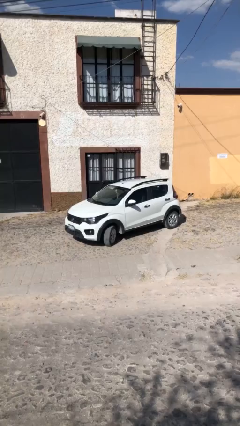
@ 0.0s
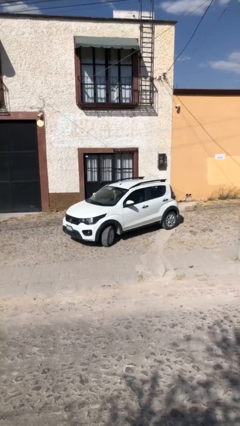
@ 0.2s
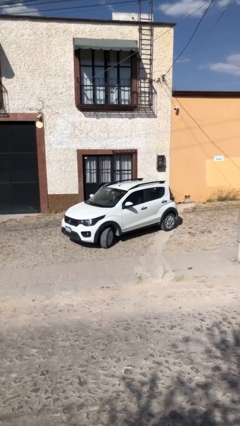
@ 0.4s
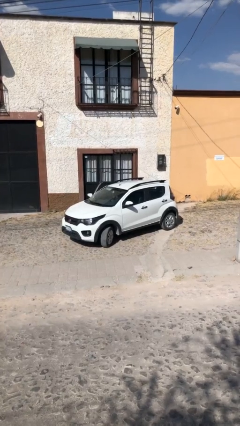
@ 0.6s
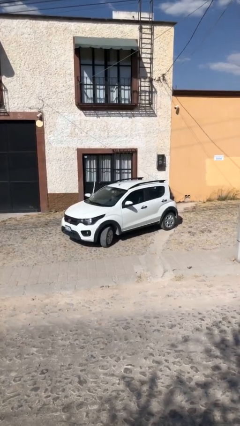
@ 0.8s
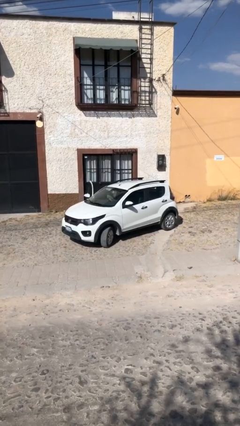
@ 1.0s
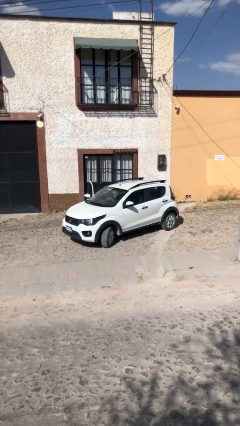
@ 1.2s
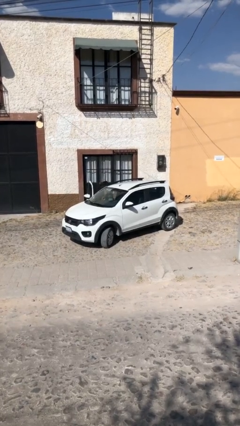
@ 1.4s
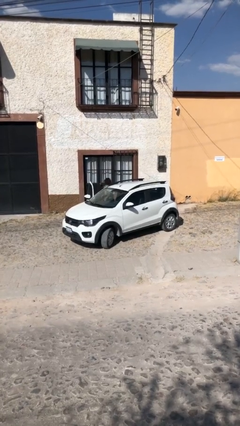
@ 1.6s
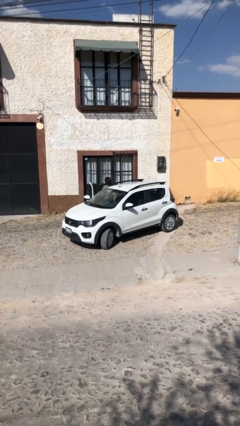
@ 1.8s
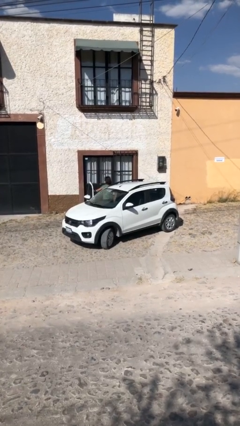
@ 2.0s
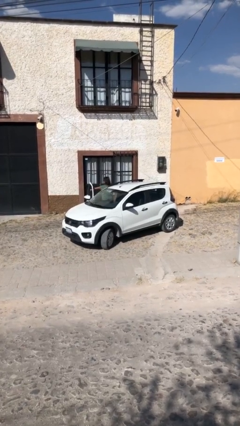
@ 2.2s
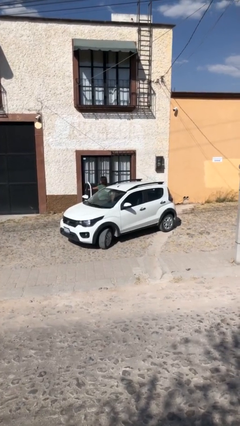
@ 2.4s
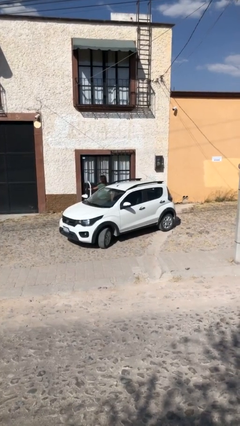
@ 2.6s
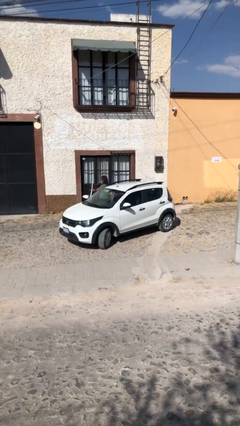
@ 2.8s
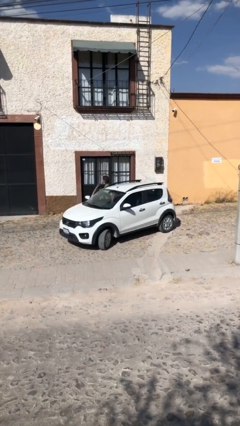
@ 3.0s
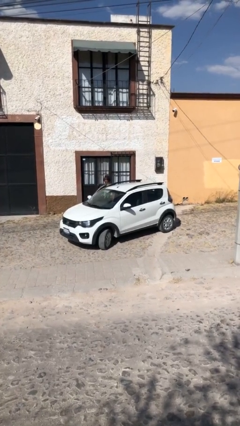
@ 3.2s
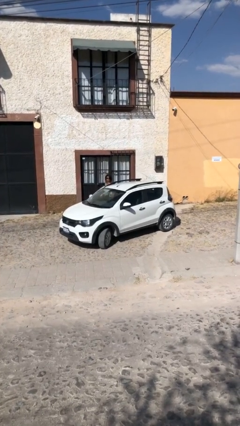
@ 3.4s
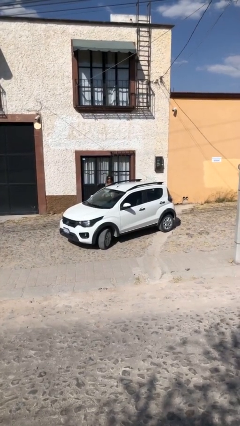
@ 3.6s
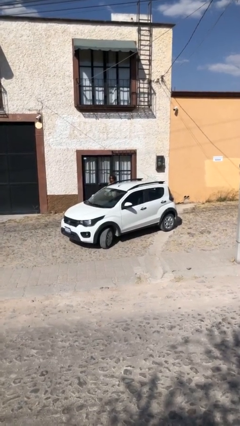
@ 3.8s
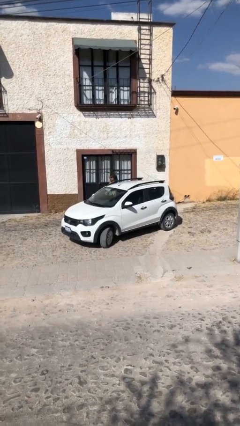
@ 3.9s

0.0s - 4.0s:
car drops off person

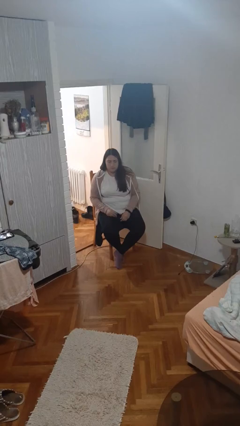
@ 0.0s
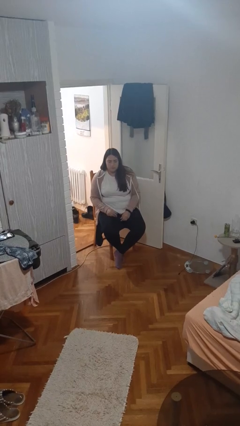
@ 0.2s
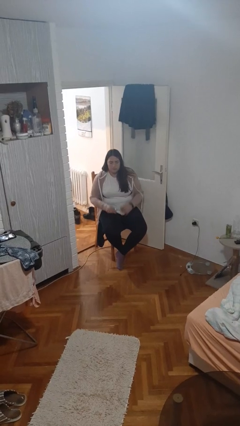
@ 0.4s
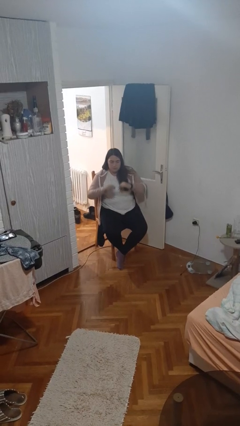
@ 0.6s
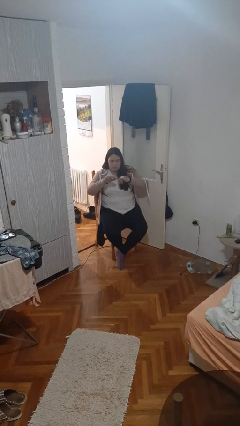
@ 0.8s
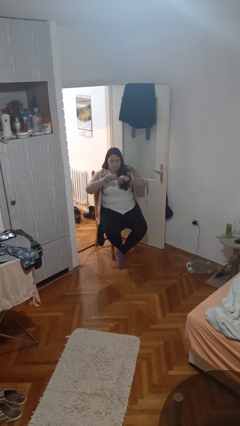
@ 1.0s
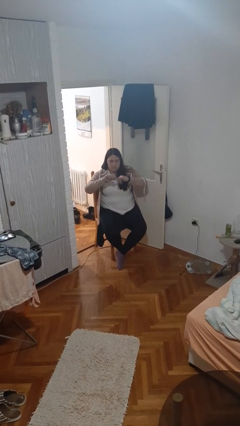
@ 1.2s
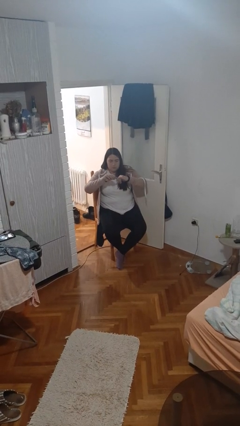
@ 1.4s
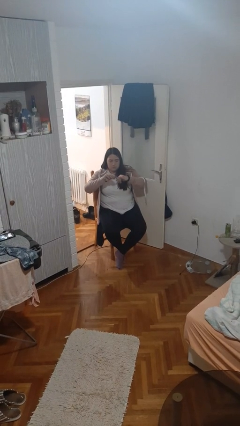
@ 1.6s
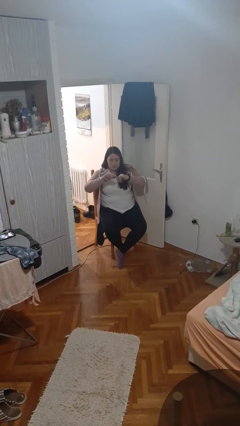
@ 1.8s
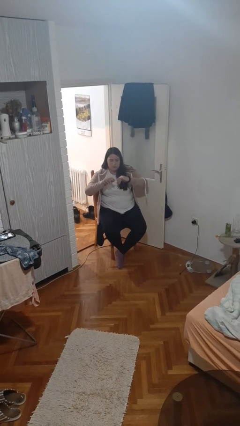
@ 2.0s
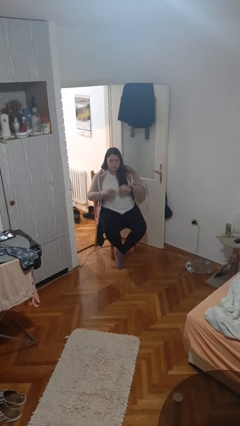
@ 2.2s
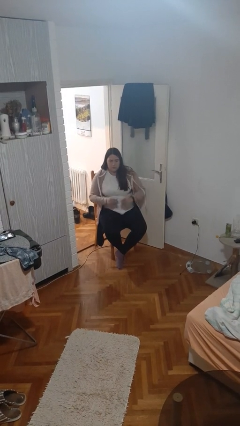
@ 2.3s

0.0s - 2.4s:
person clips fingernails

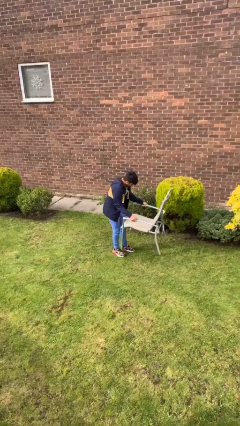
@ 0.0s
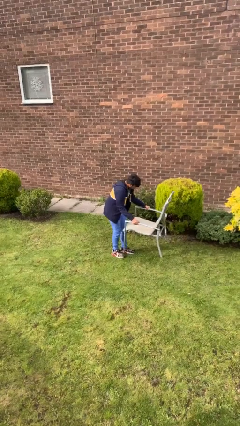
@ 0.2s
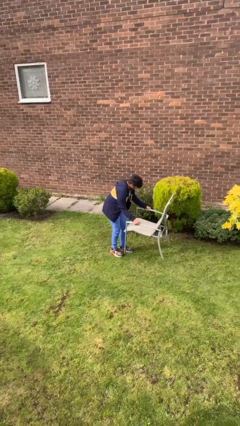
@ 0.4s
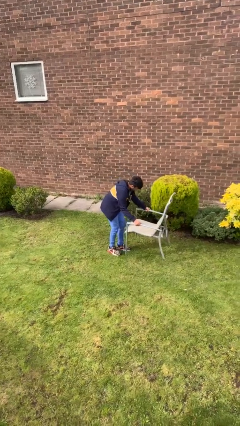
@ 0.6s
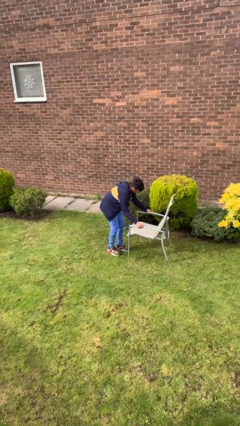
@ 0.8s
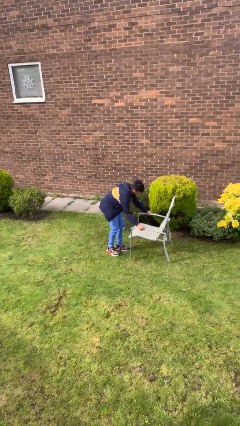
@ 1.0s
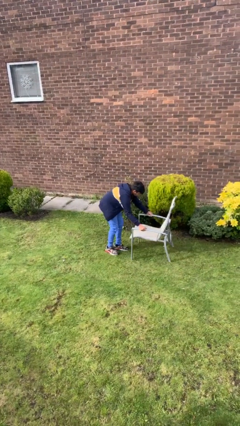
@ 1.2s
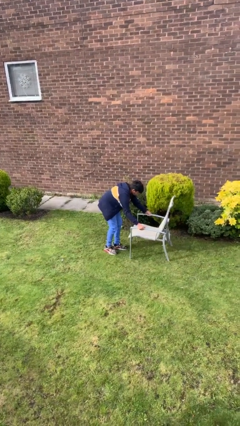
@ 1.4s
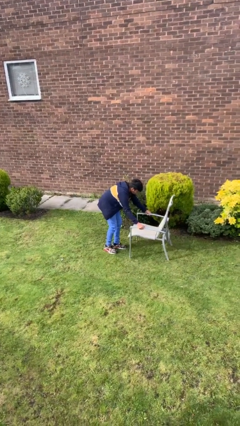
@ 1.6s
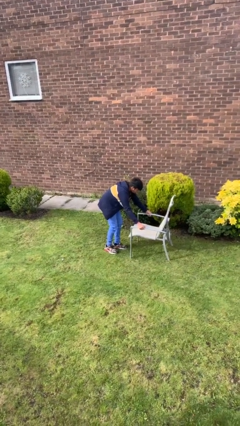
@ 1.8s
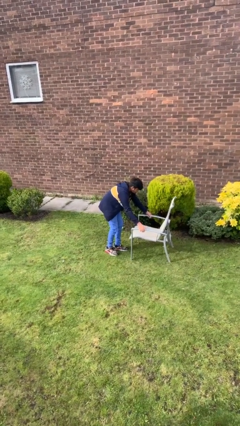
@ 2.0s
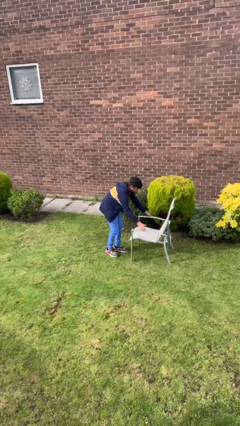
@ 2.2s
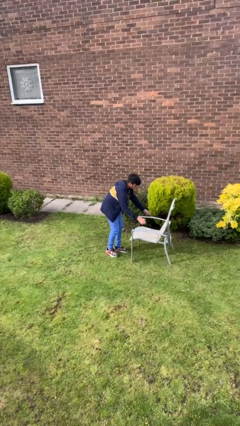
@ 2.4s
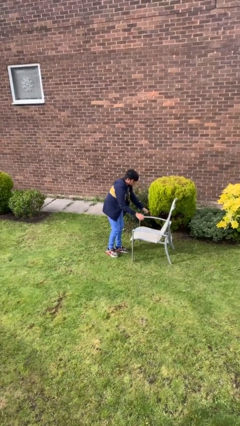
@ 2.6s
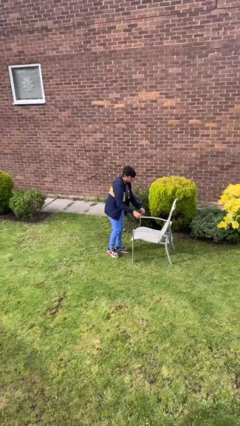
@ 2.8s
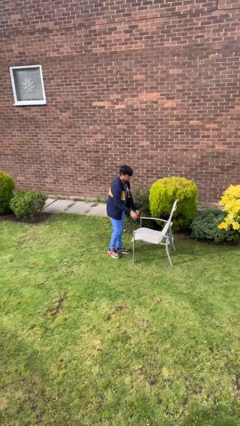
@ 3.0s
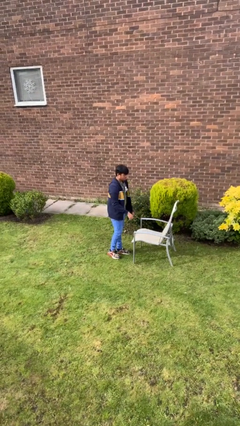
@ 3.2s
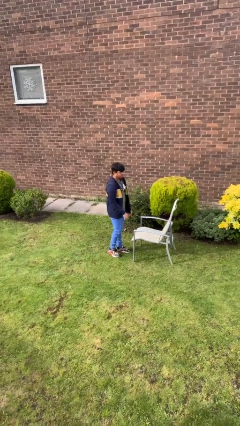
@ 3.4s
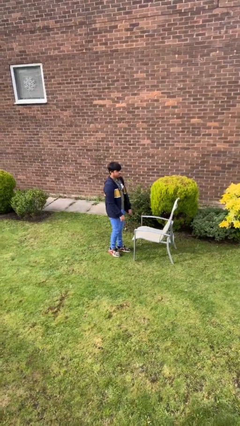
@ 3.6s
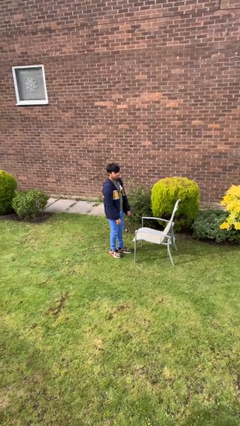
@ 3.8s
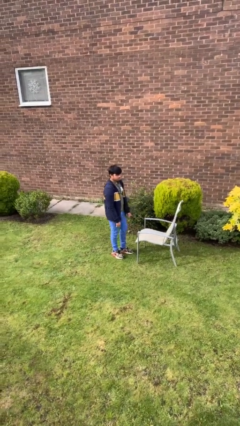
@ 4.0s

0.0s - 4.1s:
person puts down object on floor

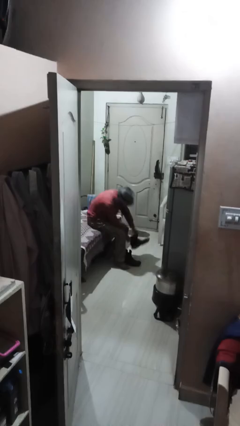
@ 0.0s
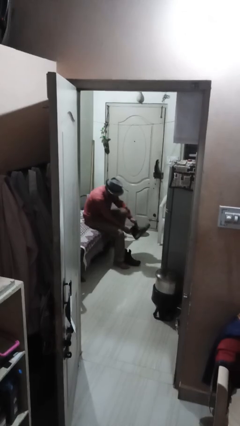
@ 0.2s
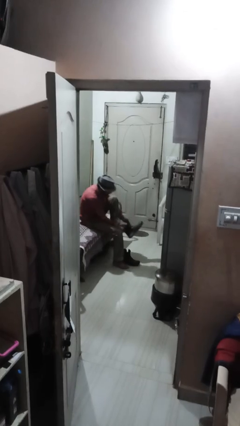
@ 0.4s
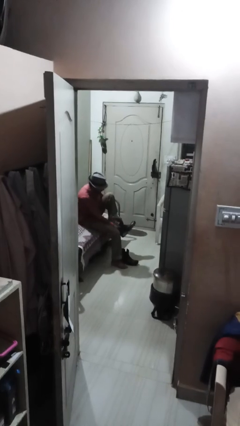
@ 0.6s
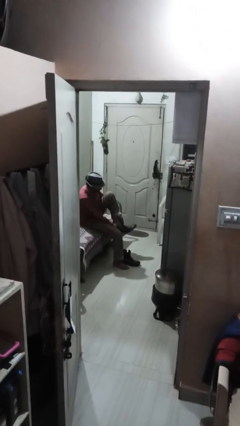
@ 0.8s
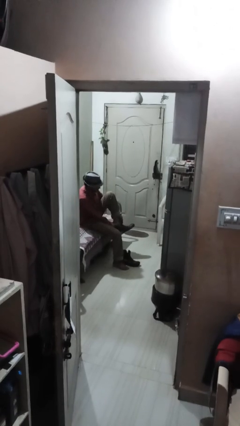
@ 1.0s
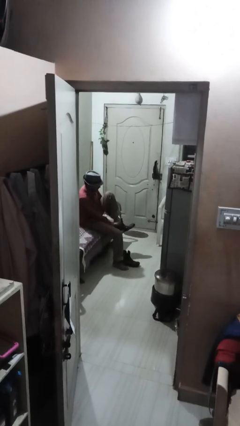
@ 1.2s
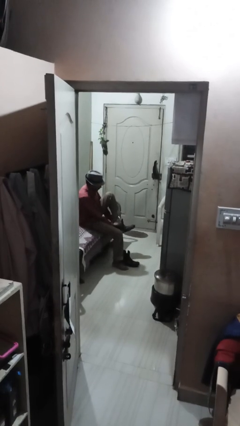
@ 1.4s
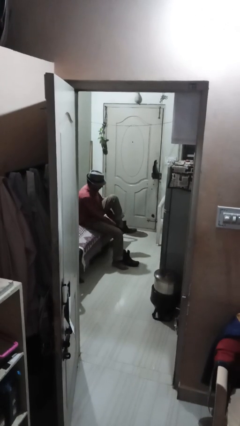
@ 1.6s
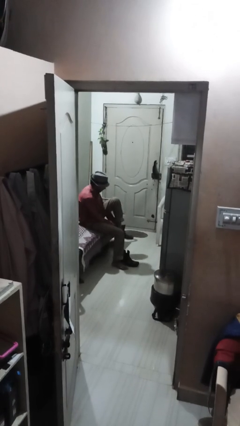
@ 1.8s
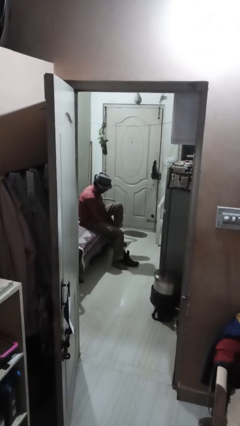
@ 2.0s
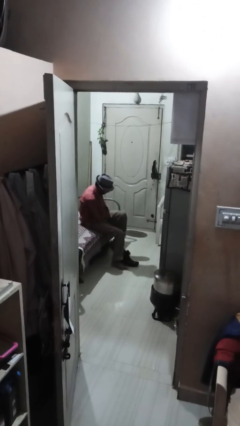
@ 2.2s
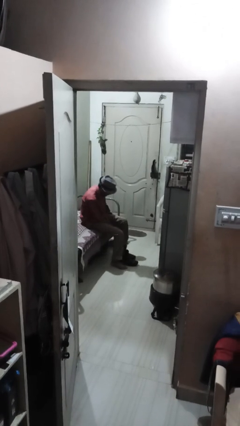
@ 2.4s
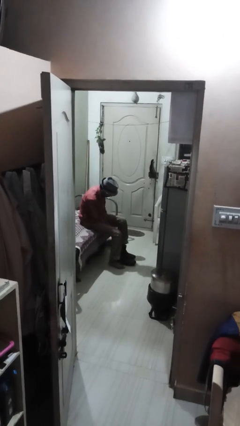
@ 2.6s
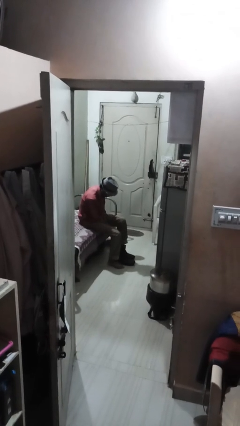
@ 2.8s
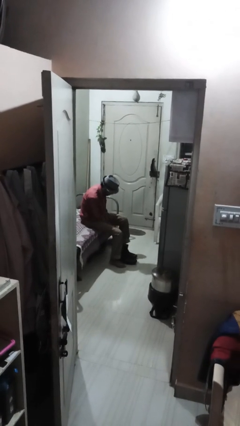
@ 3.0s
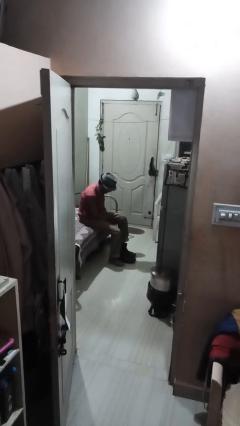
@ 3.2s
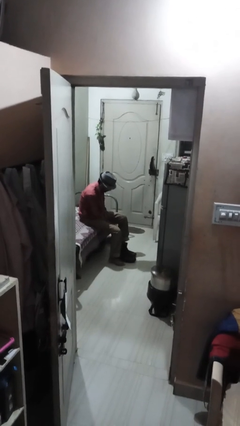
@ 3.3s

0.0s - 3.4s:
person puts on boots

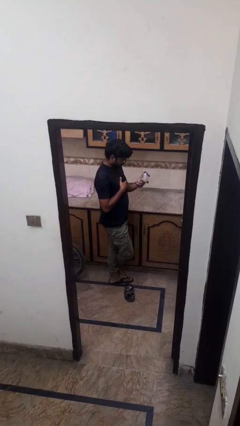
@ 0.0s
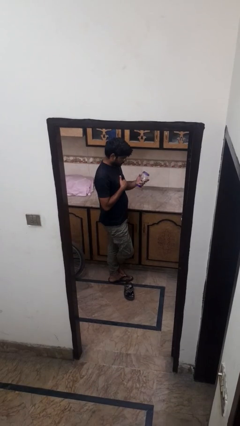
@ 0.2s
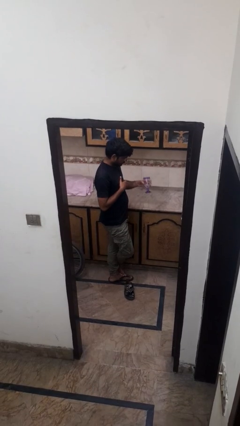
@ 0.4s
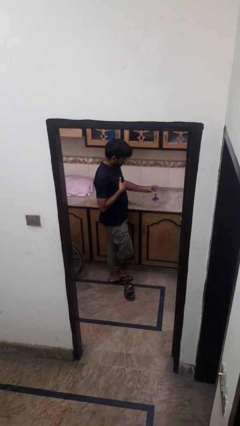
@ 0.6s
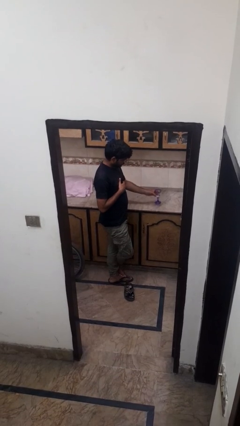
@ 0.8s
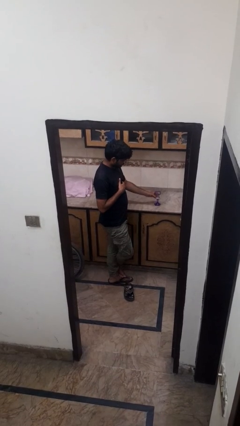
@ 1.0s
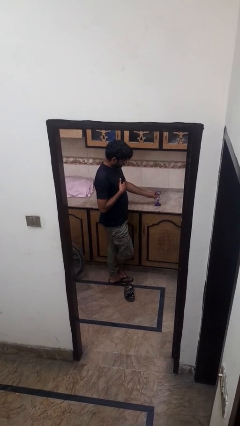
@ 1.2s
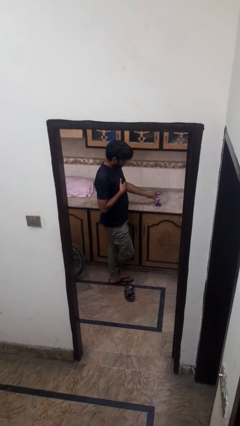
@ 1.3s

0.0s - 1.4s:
person puts down object on countertop

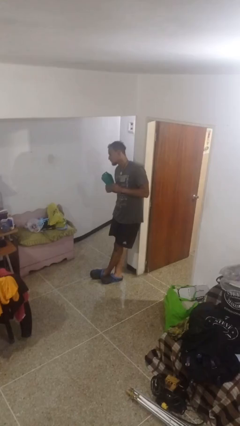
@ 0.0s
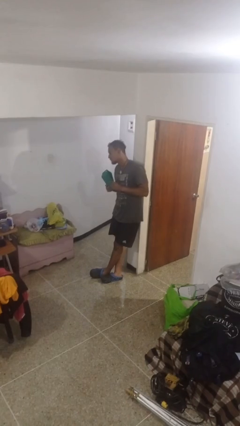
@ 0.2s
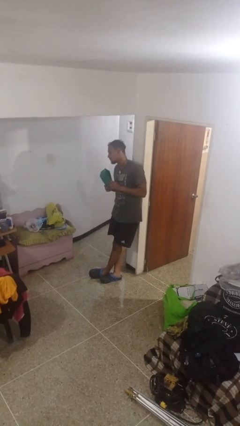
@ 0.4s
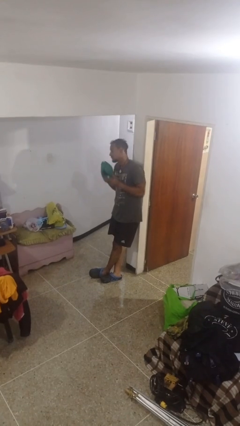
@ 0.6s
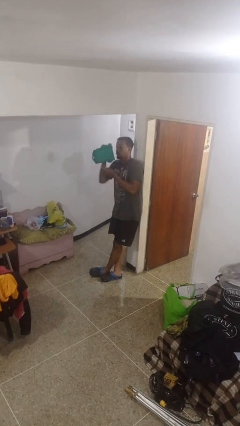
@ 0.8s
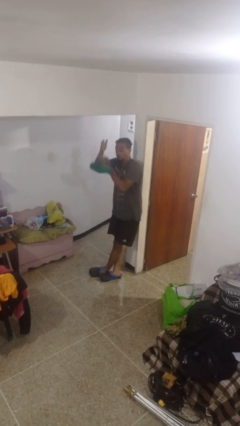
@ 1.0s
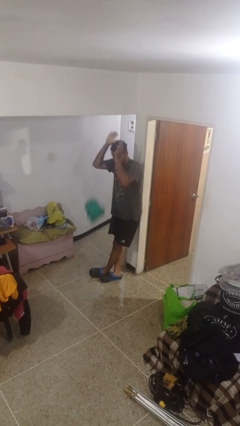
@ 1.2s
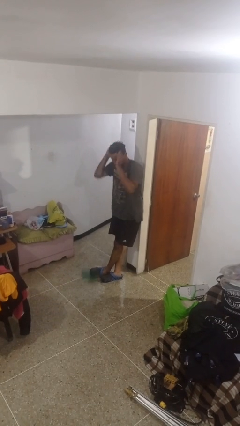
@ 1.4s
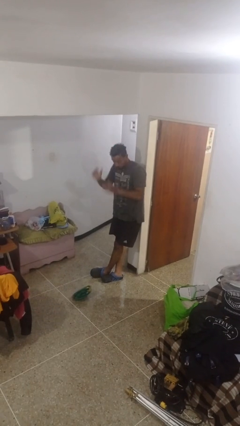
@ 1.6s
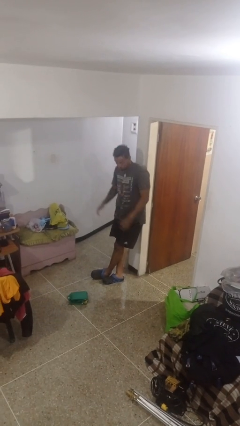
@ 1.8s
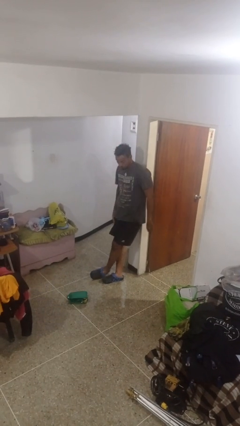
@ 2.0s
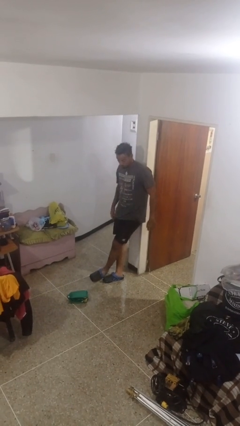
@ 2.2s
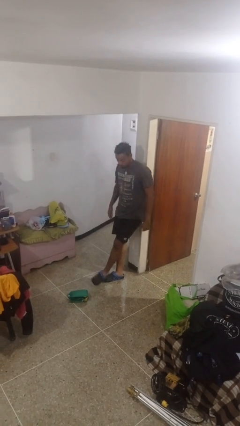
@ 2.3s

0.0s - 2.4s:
person drops object
